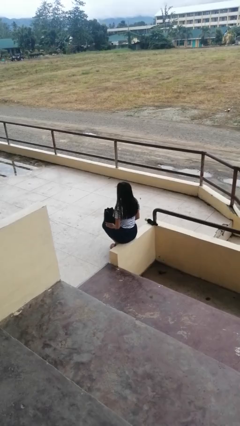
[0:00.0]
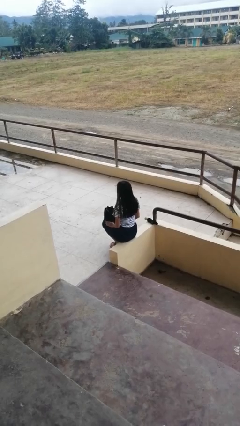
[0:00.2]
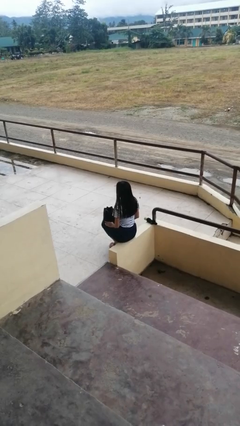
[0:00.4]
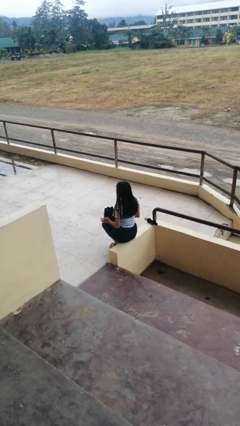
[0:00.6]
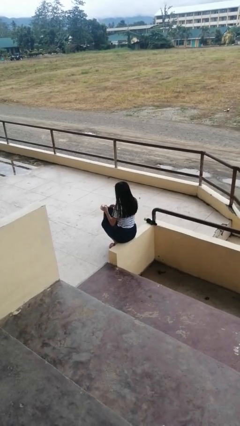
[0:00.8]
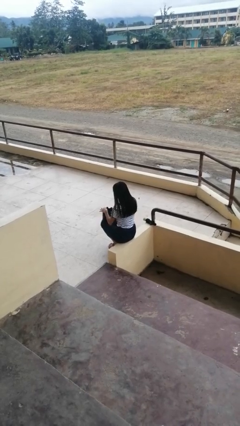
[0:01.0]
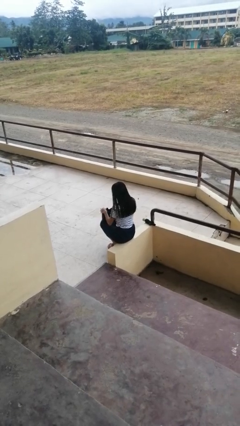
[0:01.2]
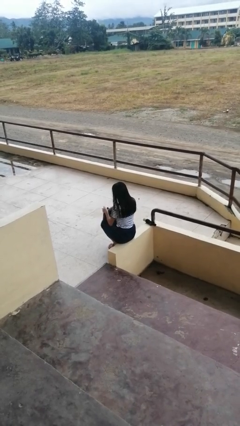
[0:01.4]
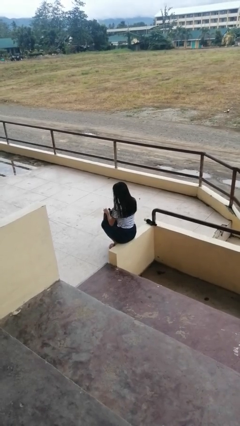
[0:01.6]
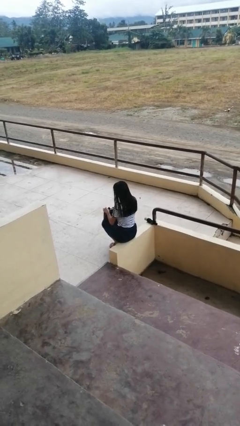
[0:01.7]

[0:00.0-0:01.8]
person searches in bag

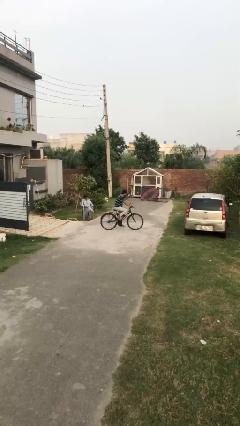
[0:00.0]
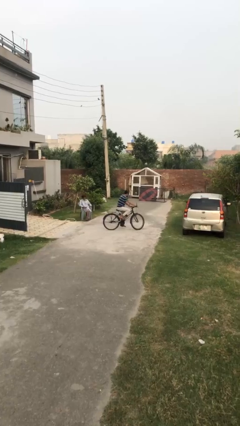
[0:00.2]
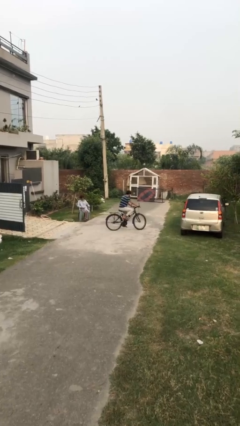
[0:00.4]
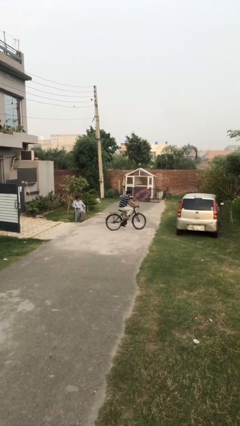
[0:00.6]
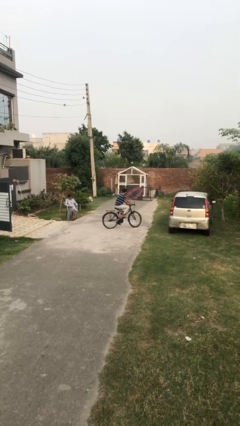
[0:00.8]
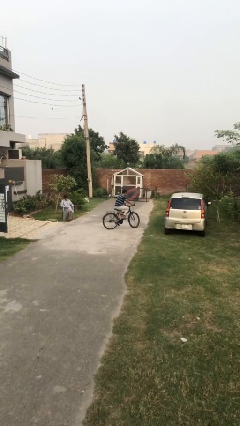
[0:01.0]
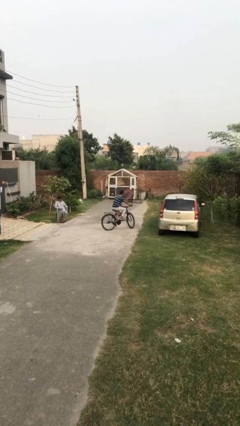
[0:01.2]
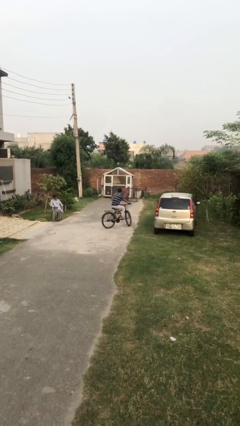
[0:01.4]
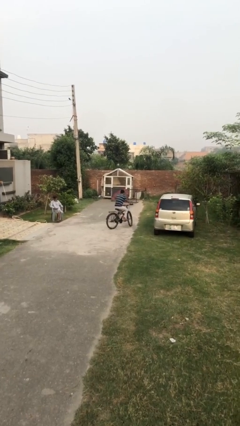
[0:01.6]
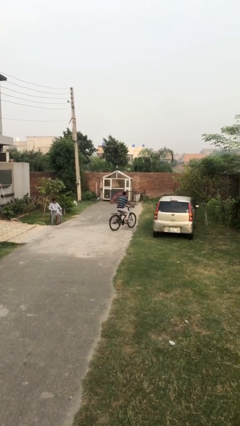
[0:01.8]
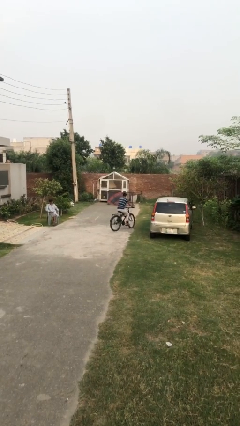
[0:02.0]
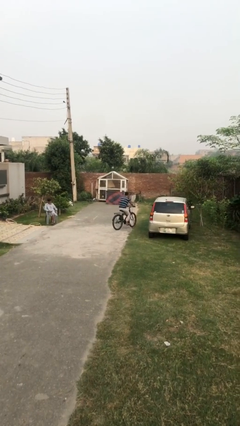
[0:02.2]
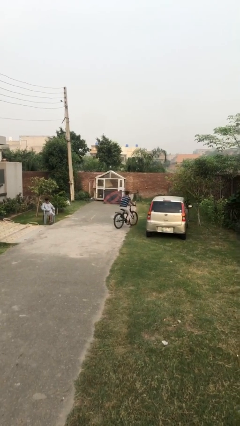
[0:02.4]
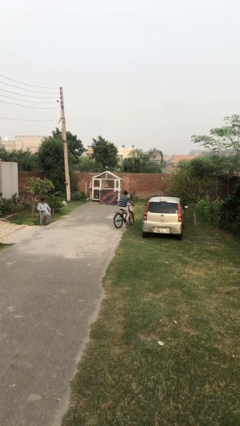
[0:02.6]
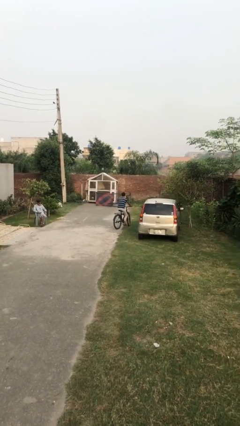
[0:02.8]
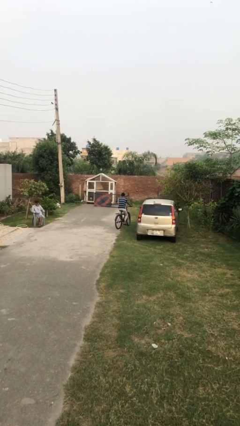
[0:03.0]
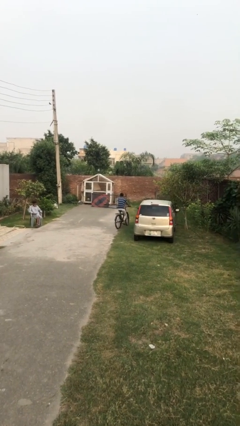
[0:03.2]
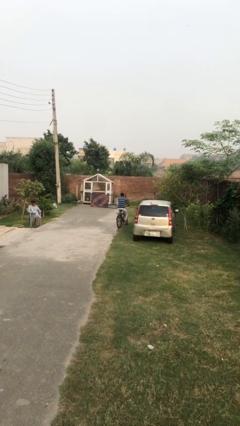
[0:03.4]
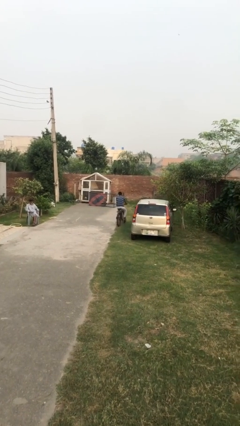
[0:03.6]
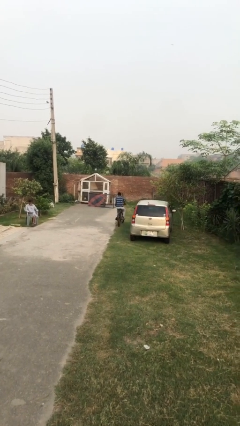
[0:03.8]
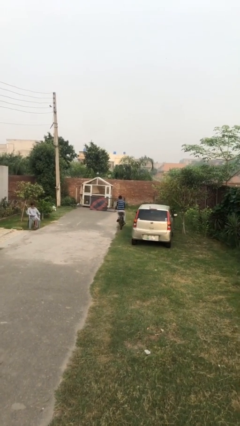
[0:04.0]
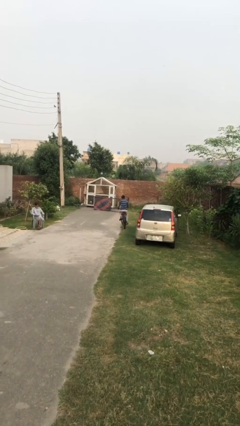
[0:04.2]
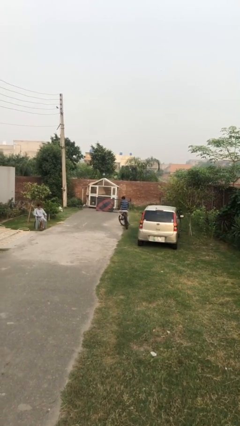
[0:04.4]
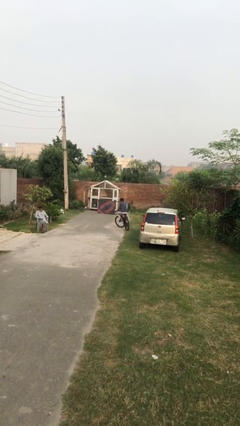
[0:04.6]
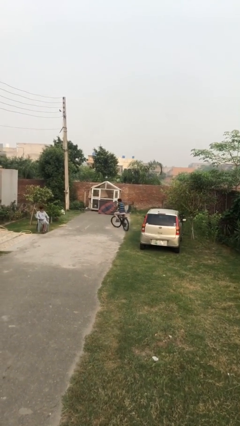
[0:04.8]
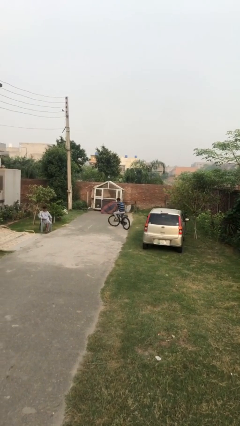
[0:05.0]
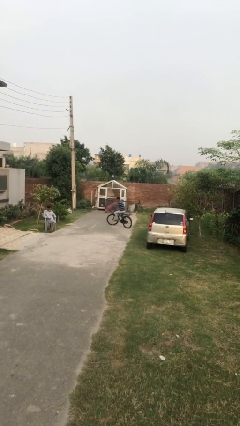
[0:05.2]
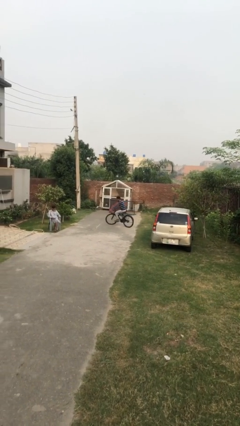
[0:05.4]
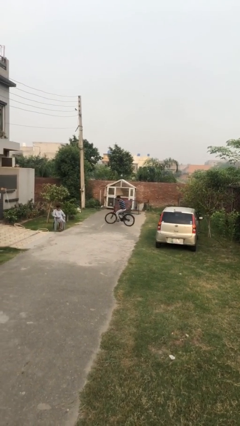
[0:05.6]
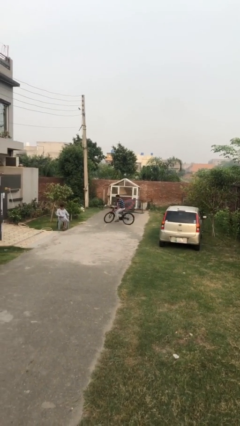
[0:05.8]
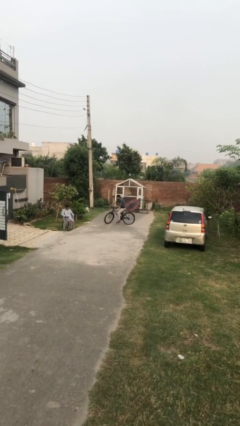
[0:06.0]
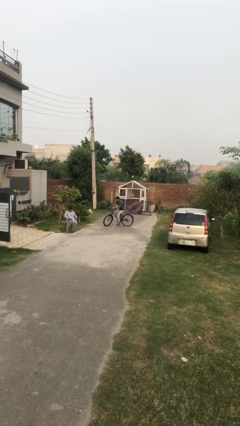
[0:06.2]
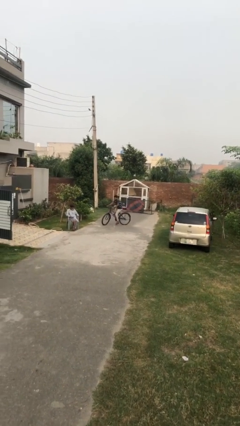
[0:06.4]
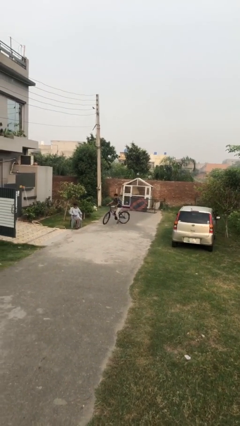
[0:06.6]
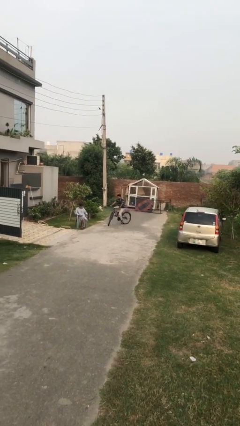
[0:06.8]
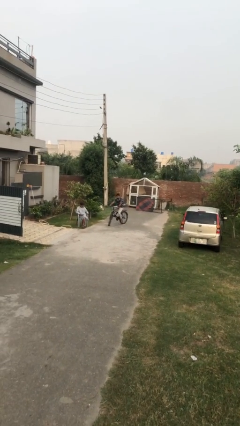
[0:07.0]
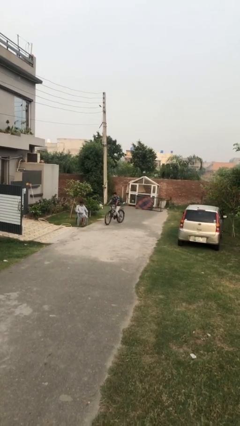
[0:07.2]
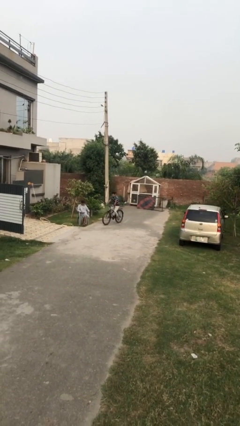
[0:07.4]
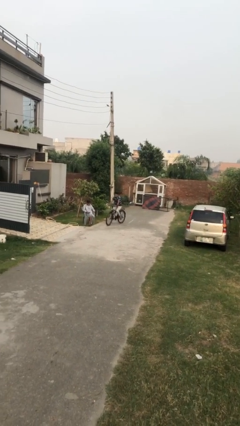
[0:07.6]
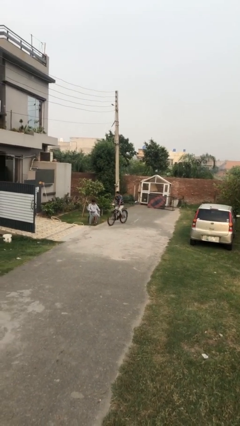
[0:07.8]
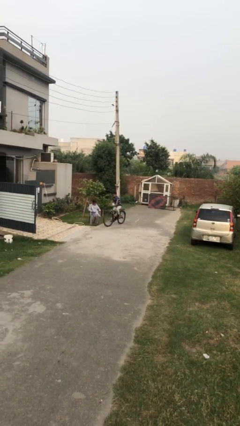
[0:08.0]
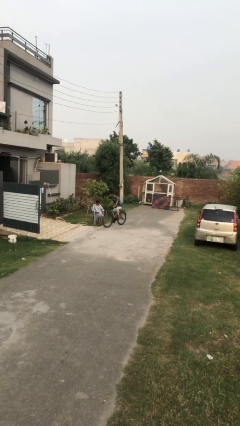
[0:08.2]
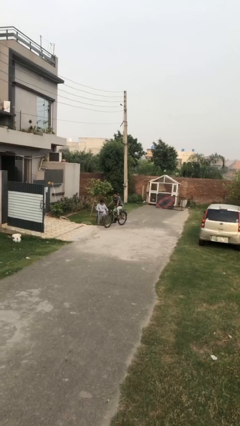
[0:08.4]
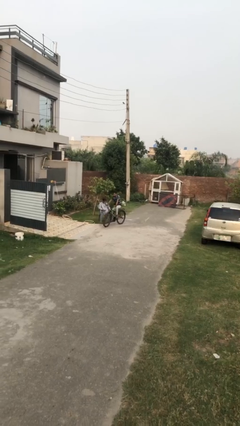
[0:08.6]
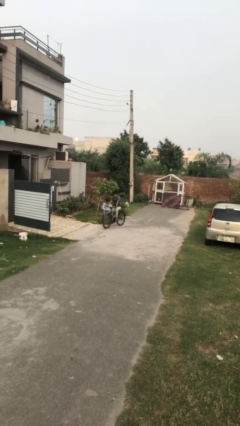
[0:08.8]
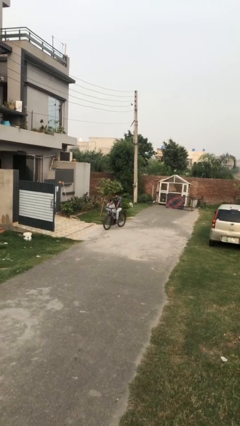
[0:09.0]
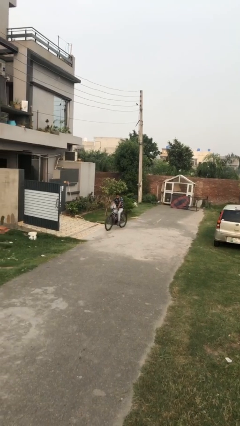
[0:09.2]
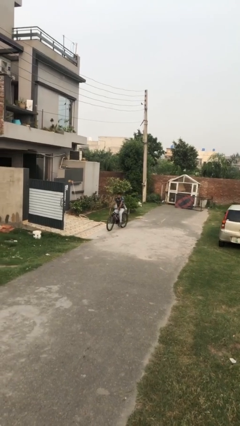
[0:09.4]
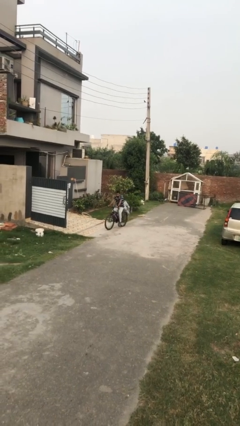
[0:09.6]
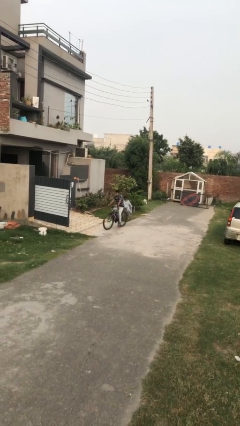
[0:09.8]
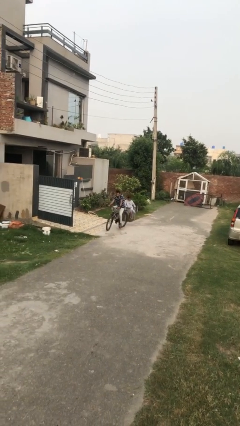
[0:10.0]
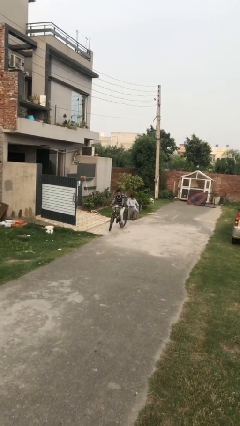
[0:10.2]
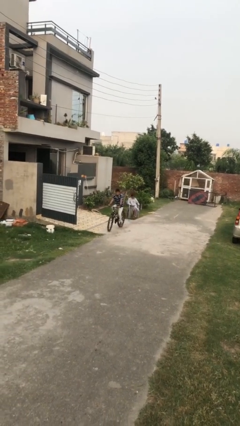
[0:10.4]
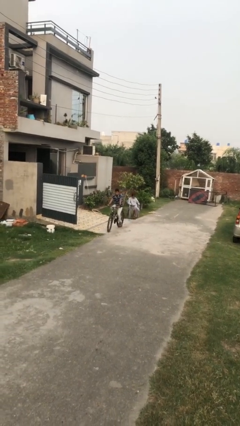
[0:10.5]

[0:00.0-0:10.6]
person rides bicycle

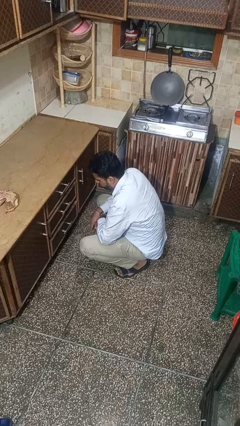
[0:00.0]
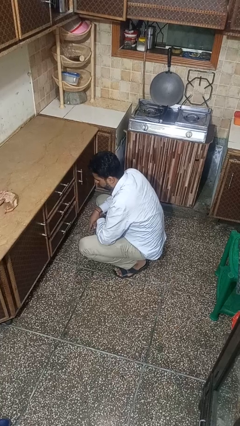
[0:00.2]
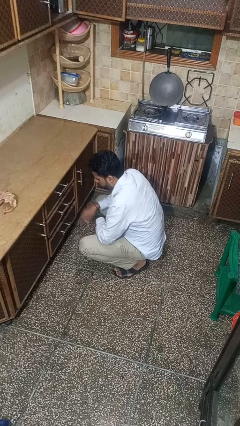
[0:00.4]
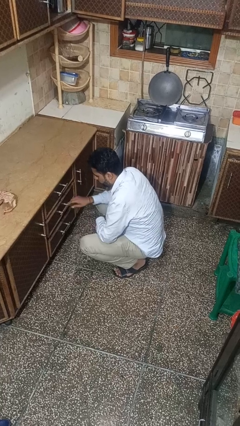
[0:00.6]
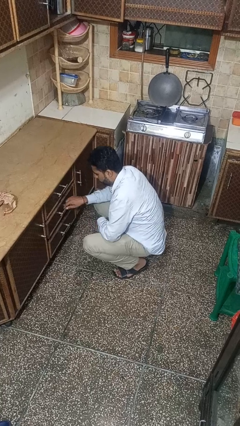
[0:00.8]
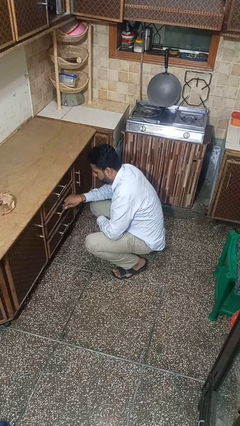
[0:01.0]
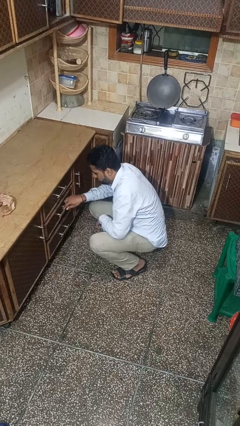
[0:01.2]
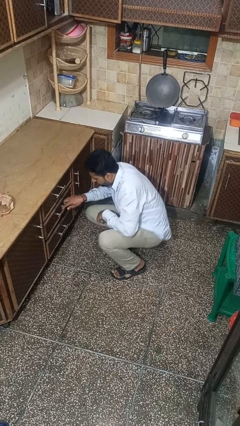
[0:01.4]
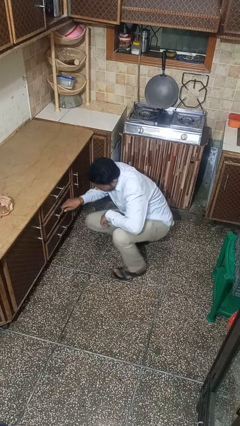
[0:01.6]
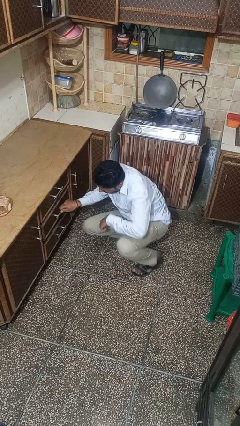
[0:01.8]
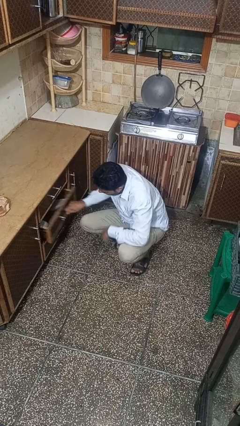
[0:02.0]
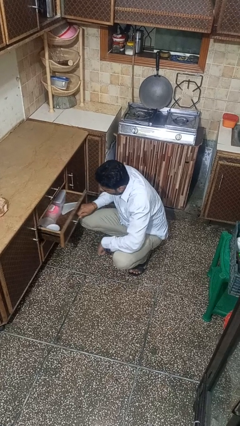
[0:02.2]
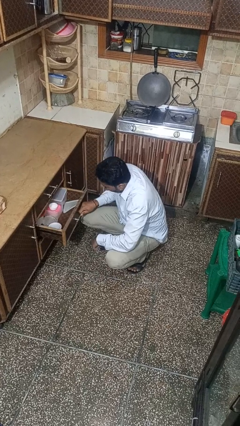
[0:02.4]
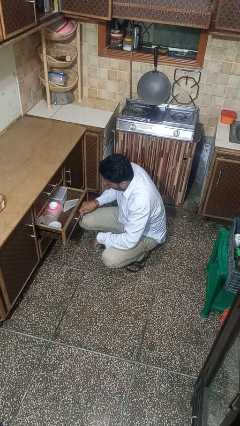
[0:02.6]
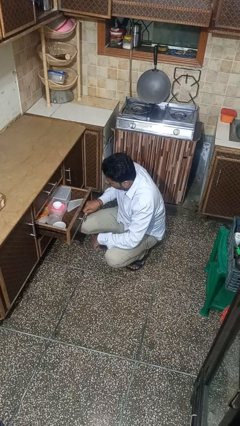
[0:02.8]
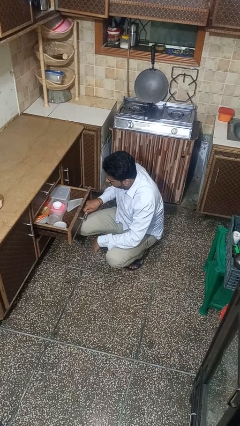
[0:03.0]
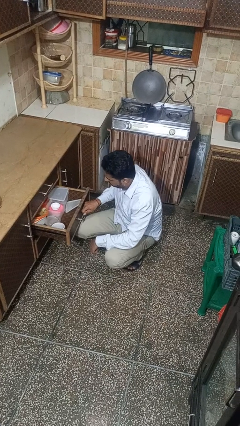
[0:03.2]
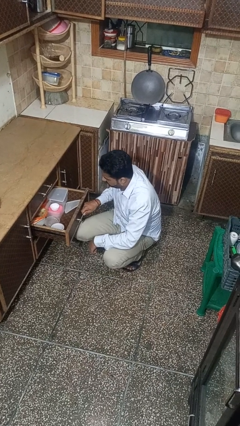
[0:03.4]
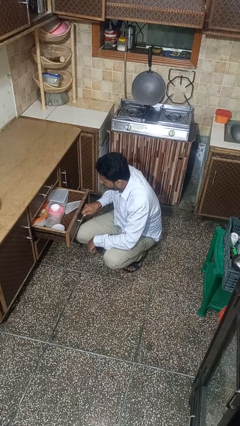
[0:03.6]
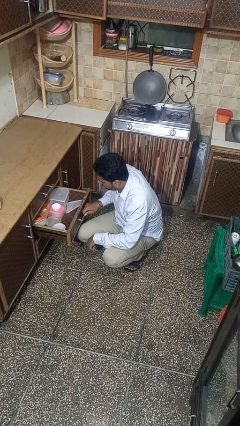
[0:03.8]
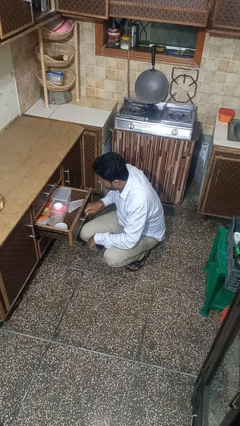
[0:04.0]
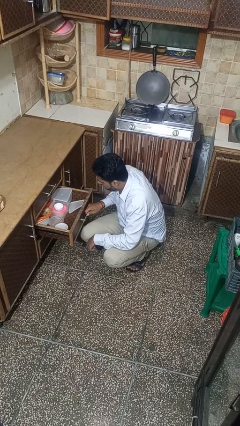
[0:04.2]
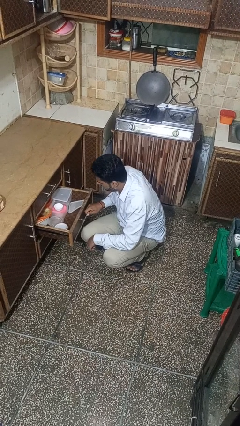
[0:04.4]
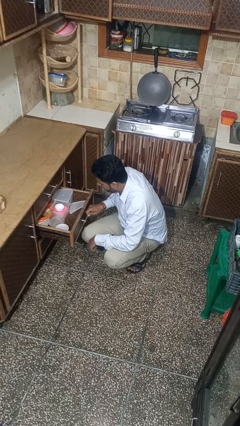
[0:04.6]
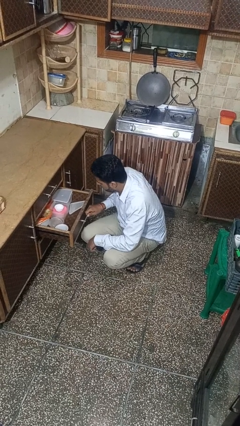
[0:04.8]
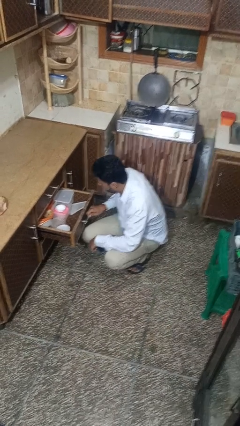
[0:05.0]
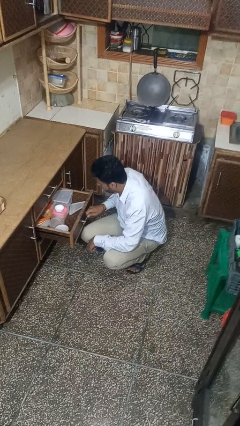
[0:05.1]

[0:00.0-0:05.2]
person opens kitchen drawer

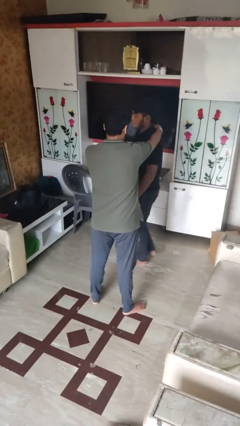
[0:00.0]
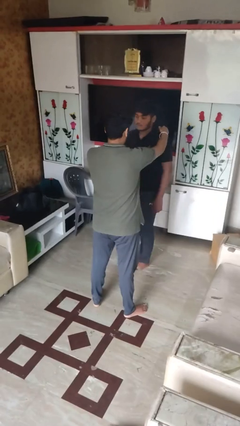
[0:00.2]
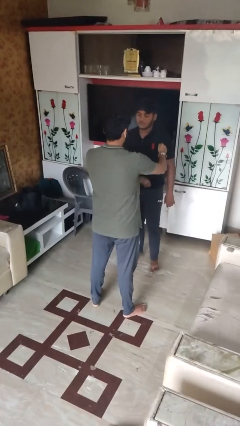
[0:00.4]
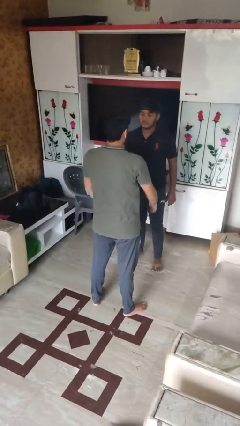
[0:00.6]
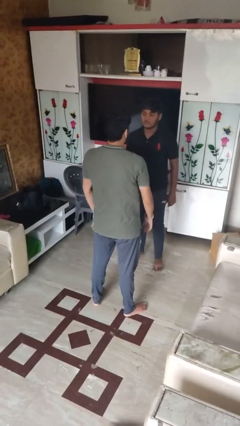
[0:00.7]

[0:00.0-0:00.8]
person spins person around
